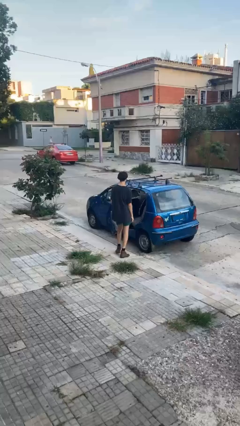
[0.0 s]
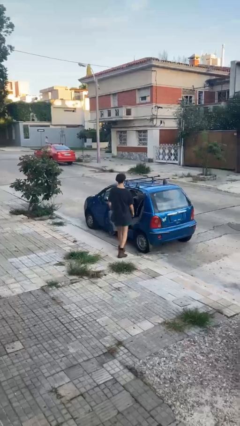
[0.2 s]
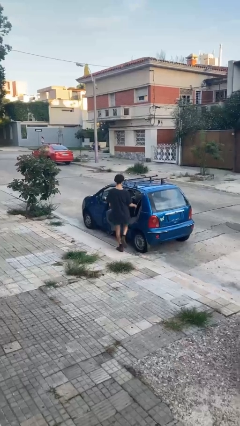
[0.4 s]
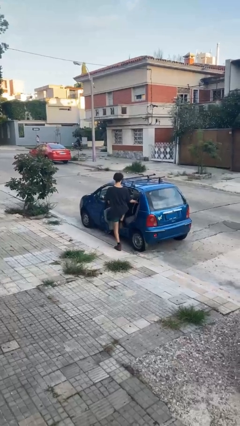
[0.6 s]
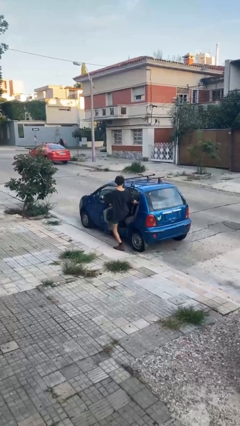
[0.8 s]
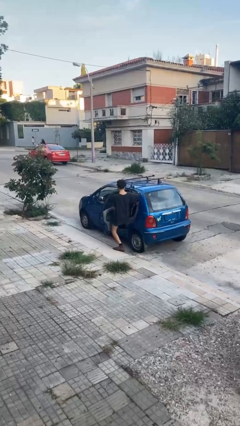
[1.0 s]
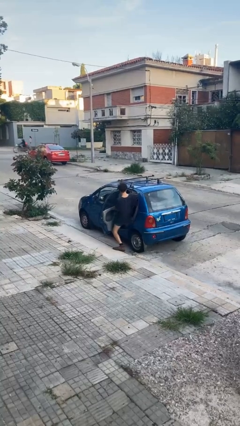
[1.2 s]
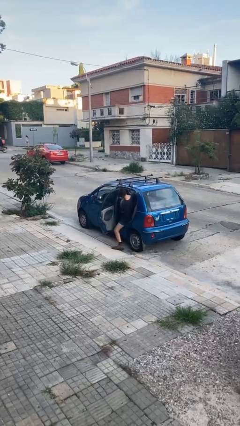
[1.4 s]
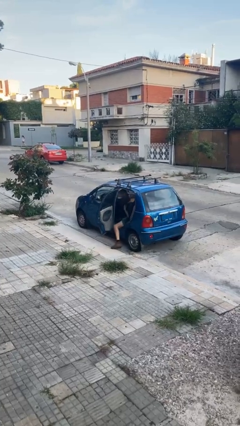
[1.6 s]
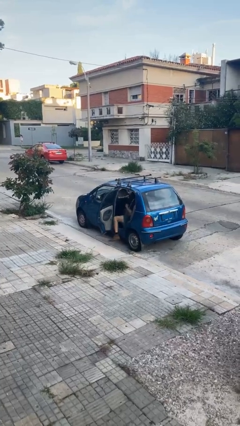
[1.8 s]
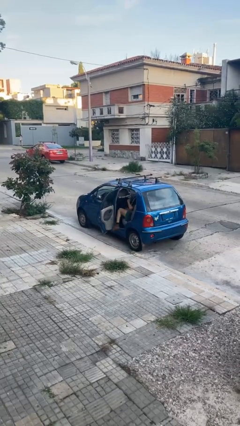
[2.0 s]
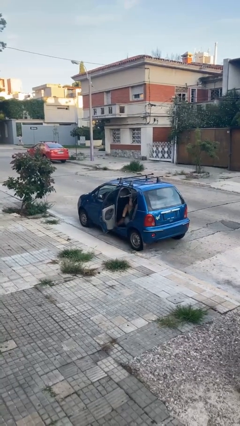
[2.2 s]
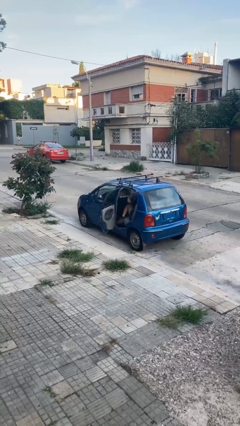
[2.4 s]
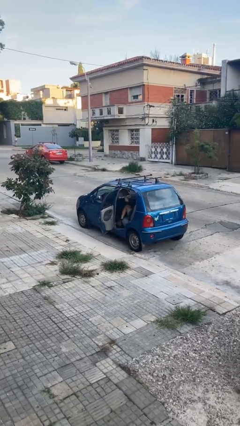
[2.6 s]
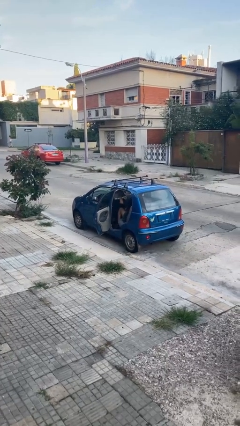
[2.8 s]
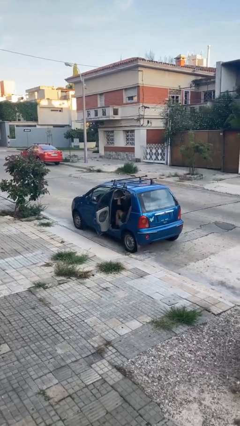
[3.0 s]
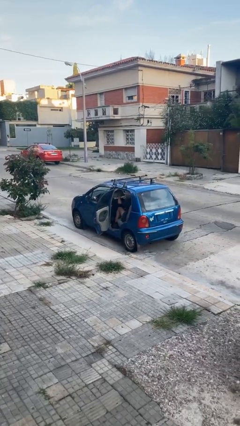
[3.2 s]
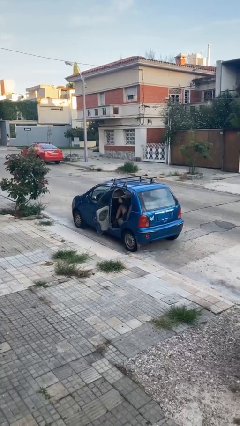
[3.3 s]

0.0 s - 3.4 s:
person enters car

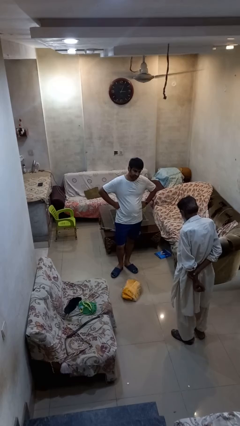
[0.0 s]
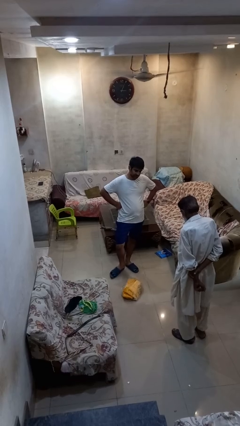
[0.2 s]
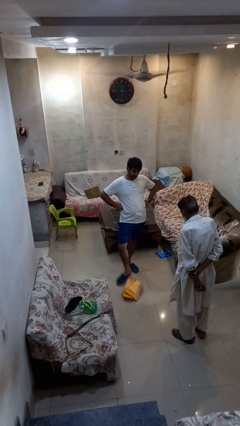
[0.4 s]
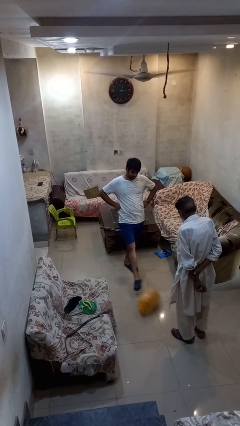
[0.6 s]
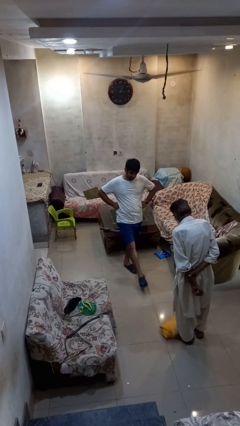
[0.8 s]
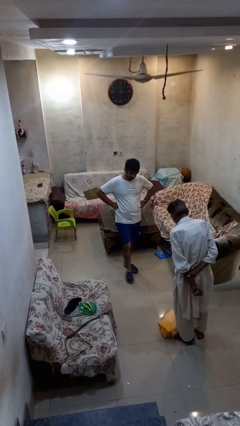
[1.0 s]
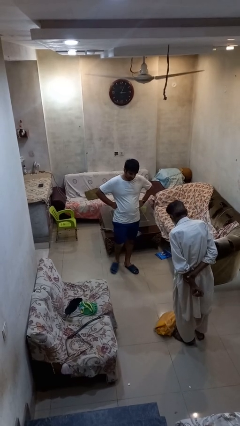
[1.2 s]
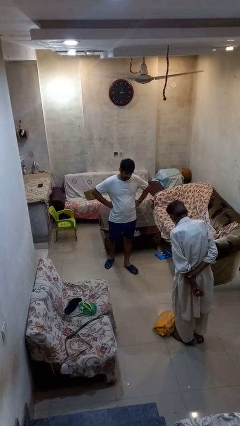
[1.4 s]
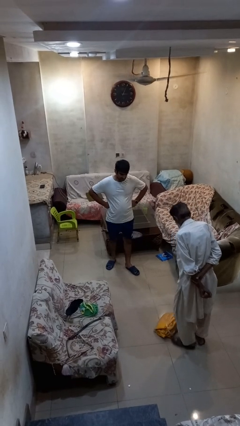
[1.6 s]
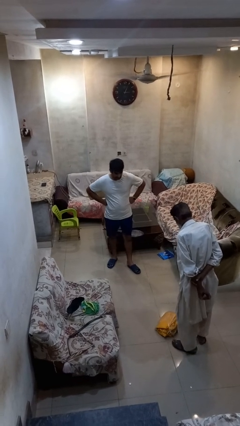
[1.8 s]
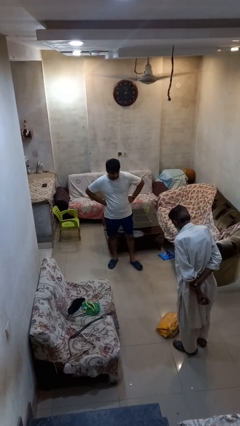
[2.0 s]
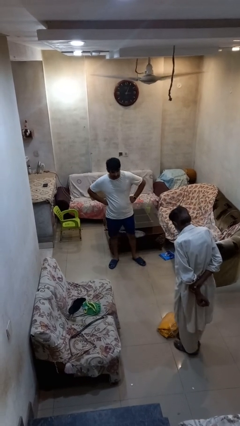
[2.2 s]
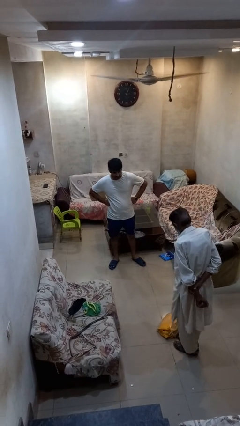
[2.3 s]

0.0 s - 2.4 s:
person kicks object to person

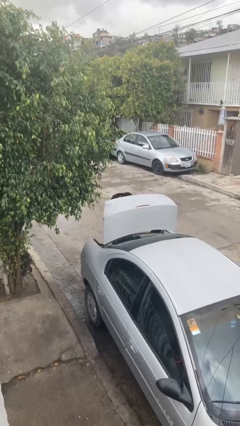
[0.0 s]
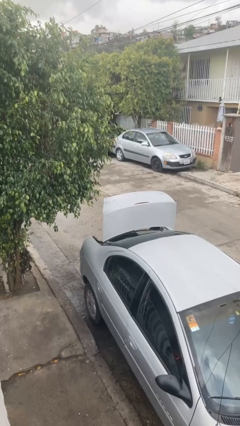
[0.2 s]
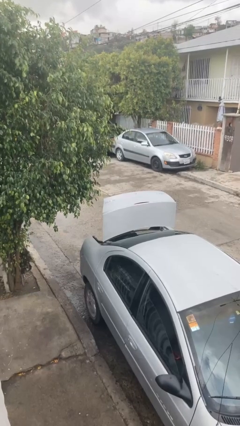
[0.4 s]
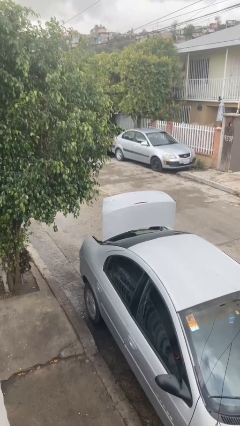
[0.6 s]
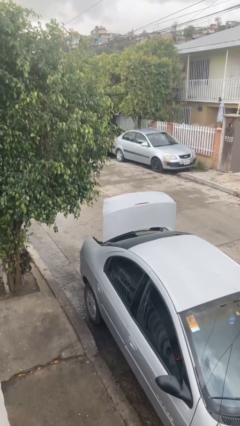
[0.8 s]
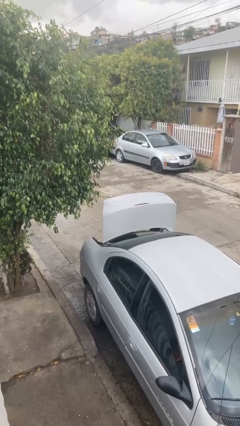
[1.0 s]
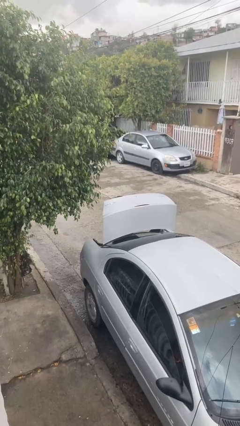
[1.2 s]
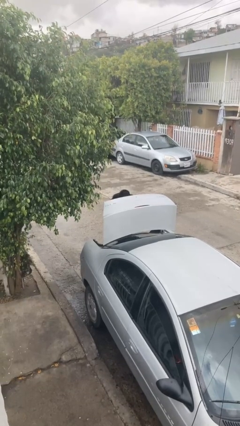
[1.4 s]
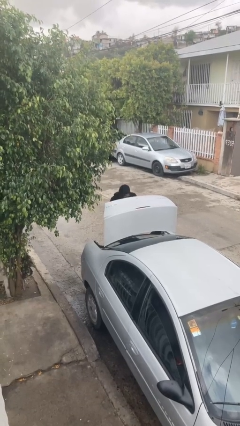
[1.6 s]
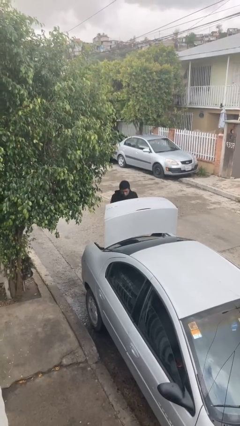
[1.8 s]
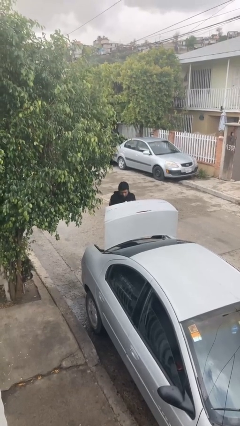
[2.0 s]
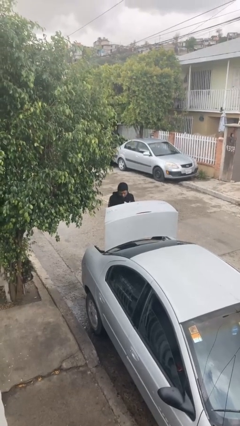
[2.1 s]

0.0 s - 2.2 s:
person unloads car

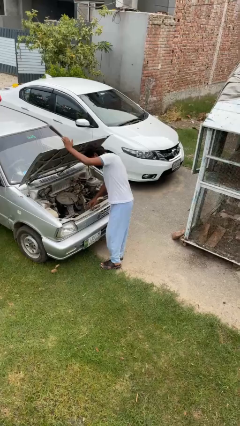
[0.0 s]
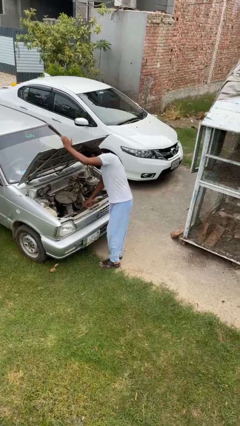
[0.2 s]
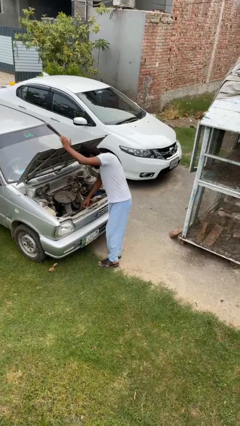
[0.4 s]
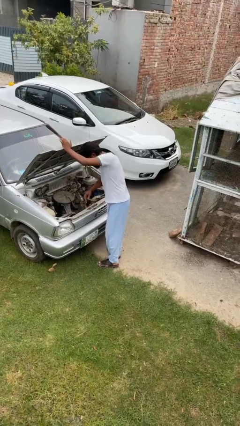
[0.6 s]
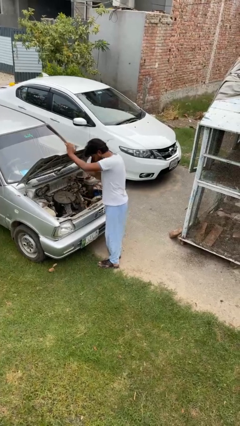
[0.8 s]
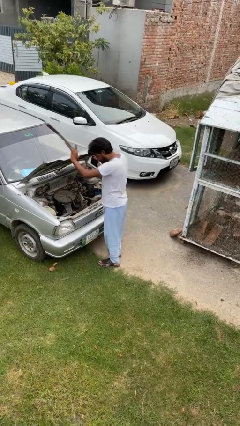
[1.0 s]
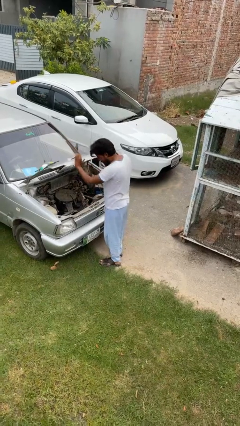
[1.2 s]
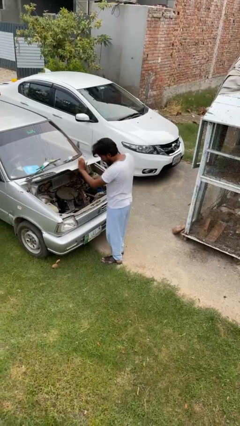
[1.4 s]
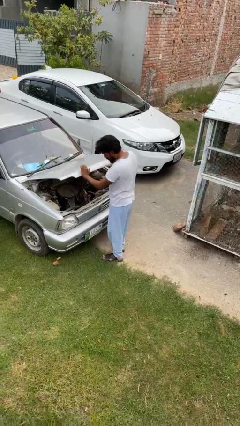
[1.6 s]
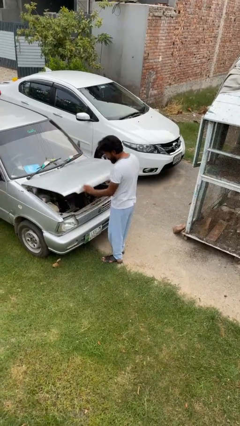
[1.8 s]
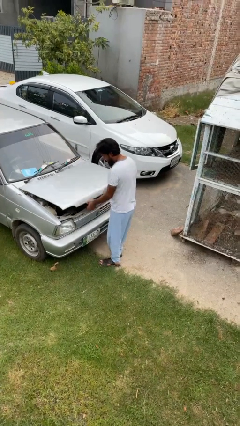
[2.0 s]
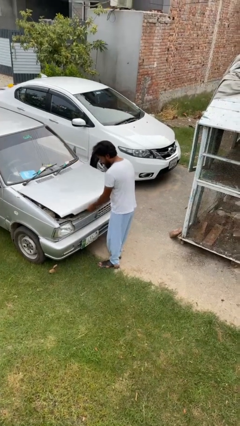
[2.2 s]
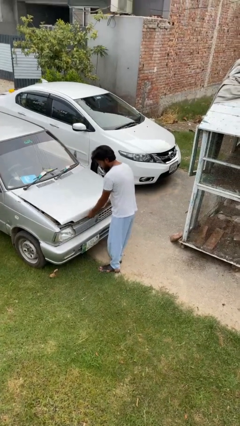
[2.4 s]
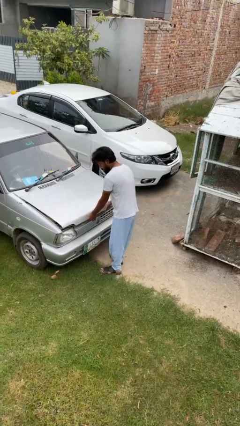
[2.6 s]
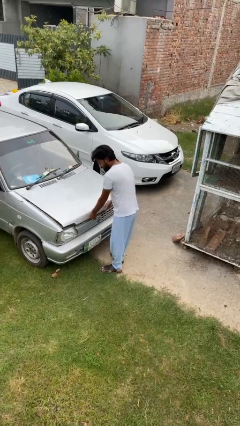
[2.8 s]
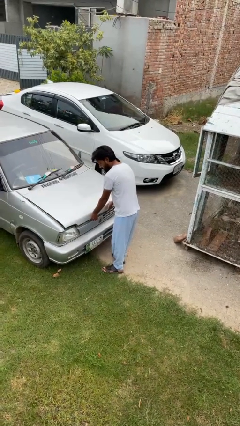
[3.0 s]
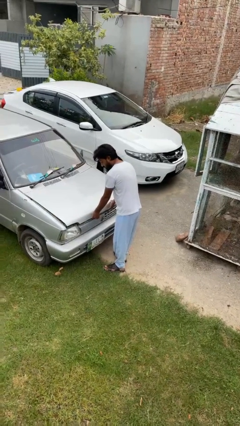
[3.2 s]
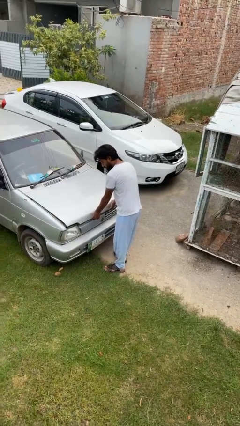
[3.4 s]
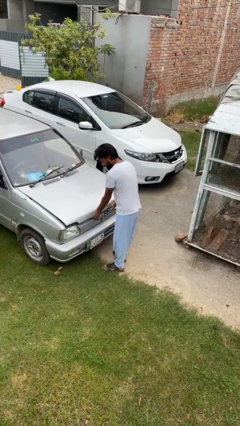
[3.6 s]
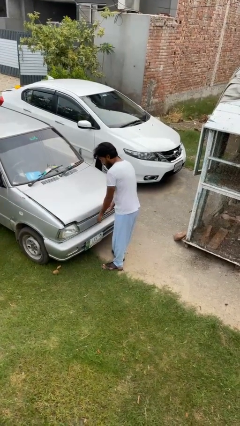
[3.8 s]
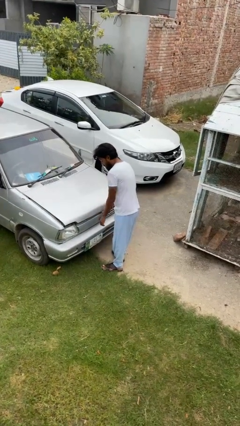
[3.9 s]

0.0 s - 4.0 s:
person closes car hood

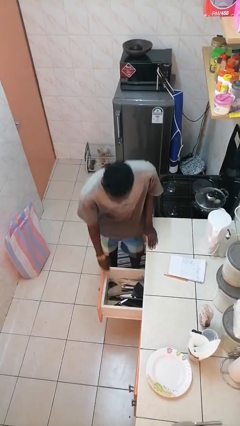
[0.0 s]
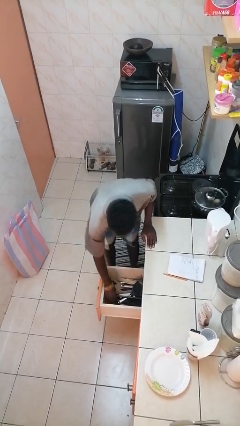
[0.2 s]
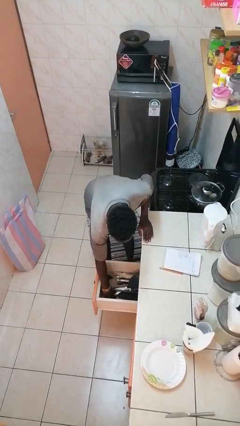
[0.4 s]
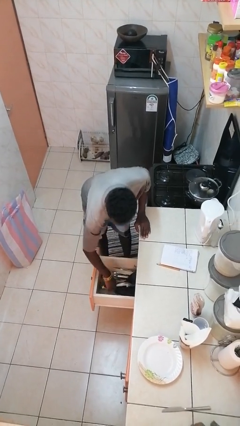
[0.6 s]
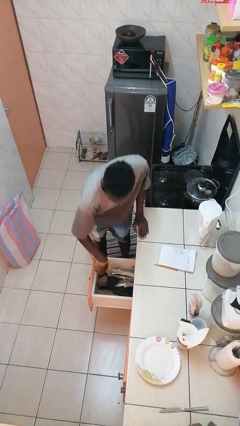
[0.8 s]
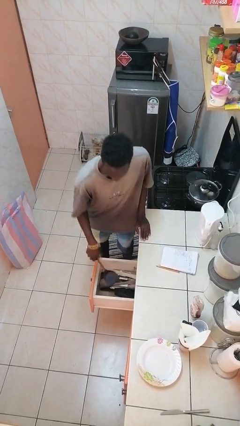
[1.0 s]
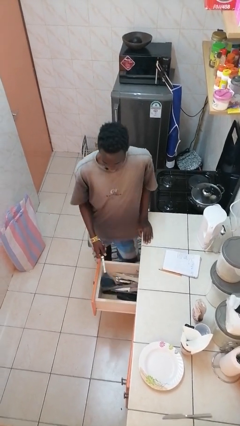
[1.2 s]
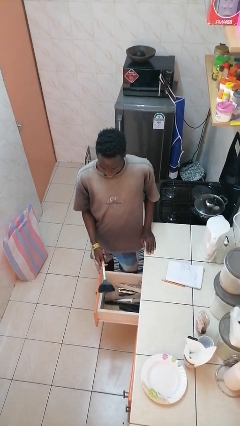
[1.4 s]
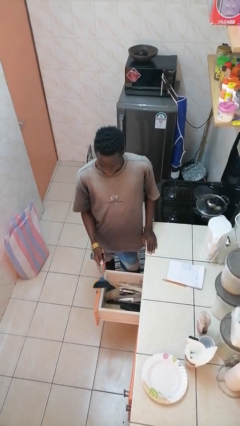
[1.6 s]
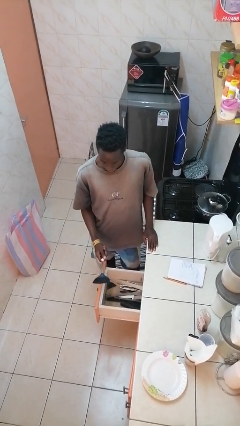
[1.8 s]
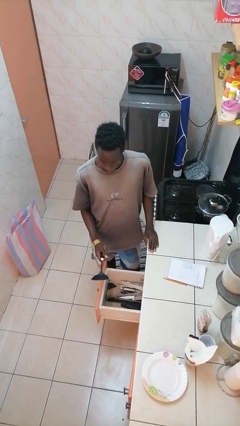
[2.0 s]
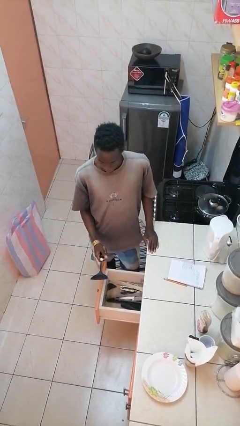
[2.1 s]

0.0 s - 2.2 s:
person takes object from kitchen drawer

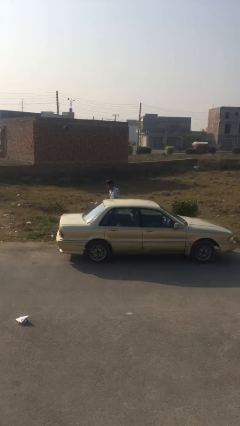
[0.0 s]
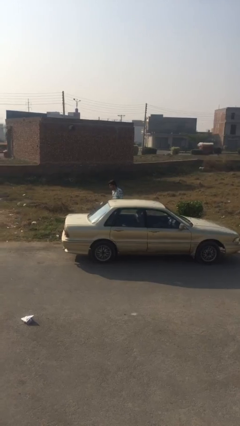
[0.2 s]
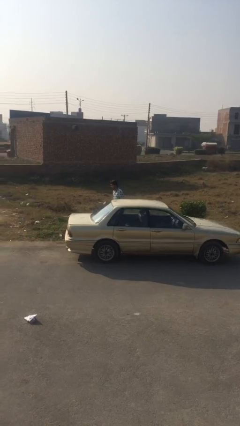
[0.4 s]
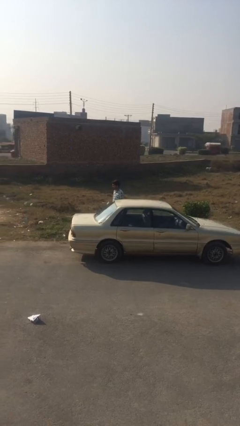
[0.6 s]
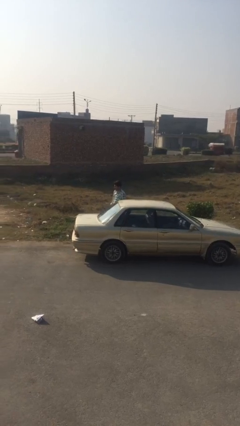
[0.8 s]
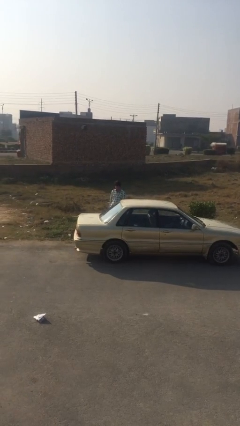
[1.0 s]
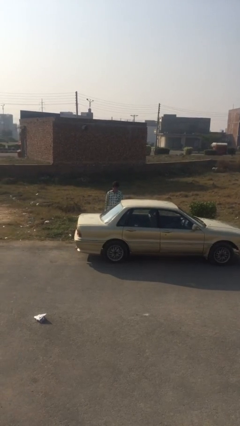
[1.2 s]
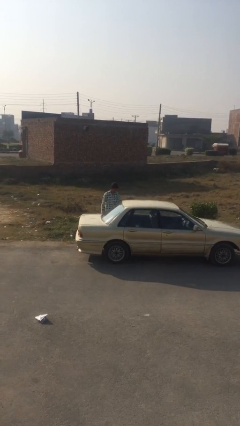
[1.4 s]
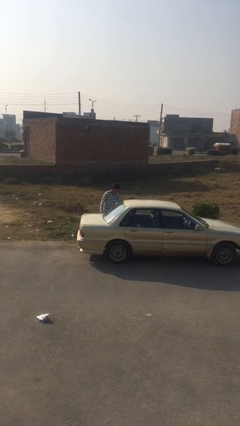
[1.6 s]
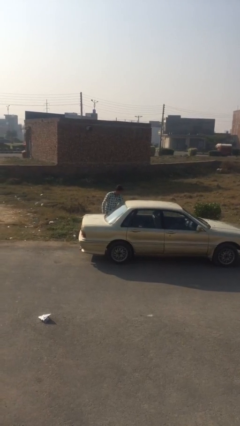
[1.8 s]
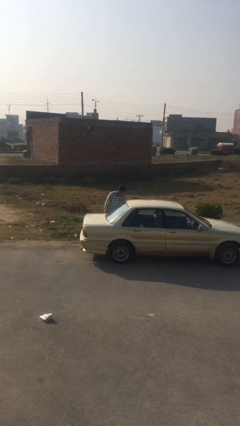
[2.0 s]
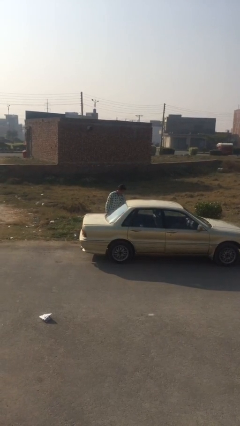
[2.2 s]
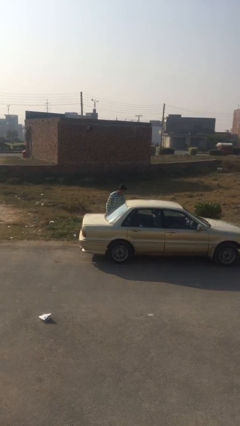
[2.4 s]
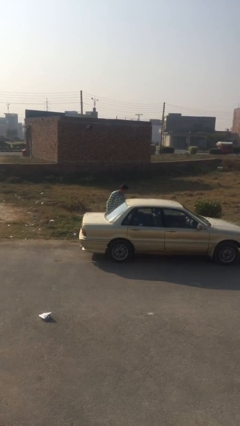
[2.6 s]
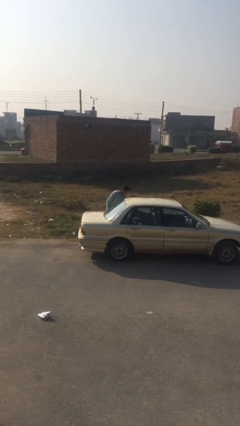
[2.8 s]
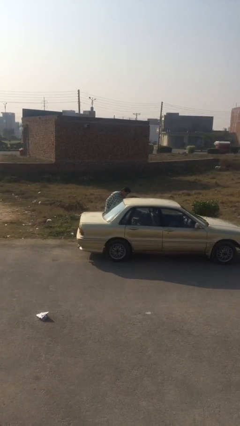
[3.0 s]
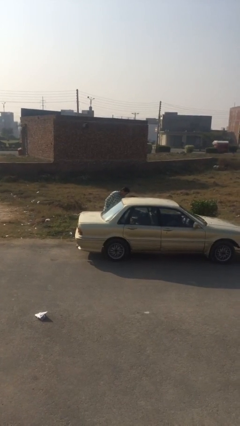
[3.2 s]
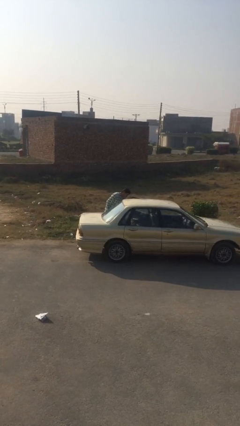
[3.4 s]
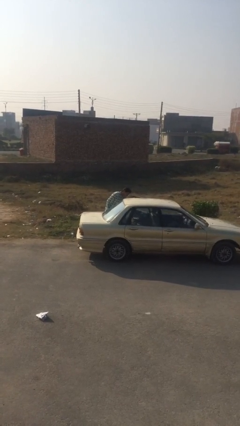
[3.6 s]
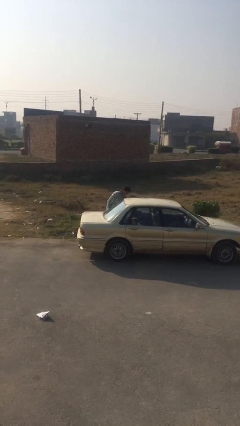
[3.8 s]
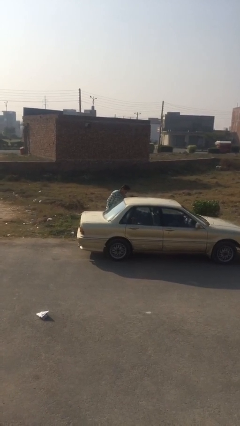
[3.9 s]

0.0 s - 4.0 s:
person opens car door
